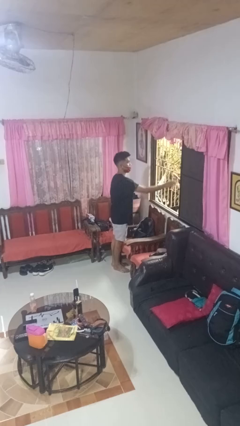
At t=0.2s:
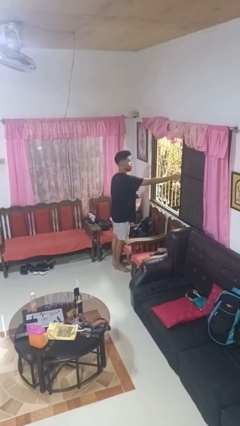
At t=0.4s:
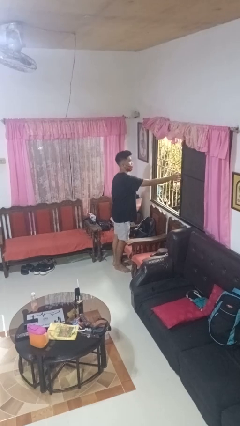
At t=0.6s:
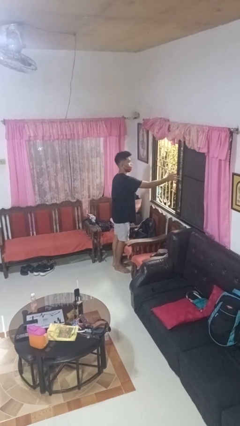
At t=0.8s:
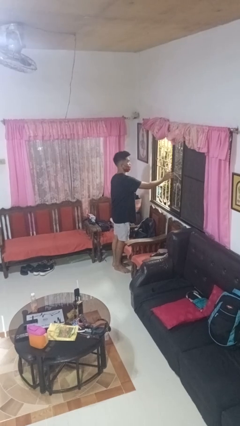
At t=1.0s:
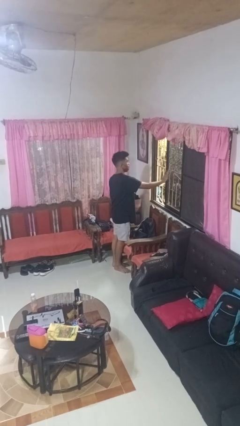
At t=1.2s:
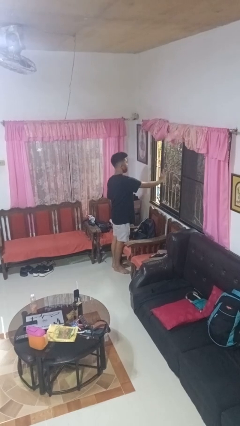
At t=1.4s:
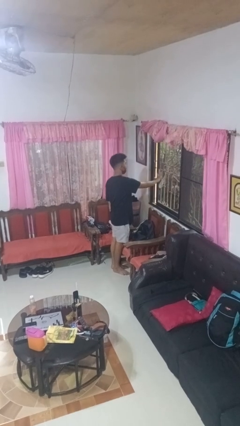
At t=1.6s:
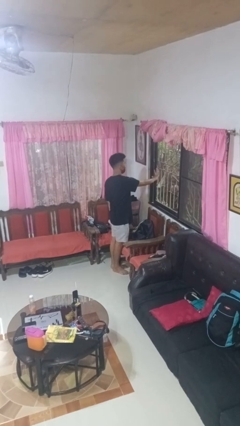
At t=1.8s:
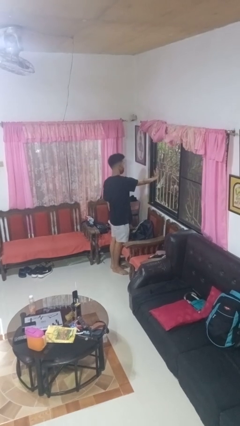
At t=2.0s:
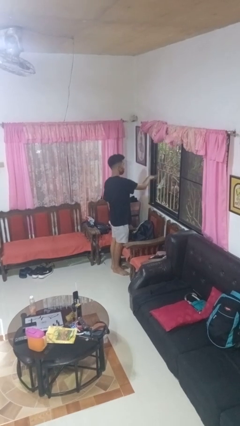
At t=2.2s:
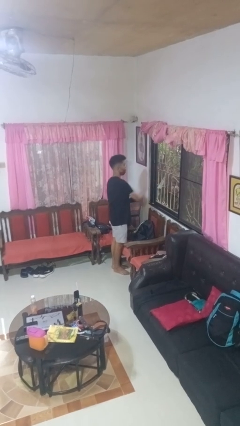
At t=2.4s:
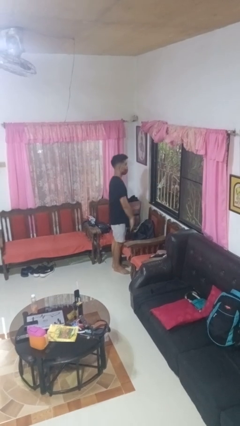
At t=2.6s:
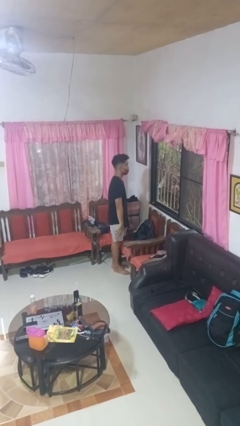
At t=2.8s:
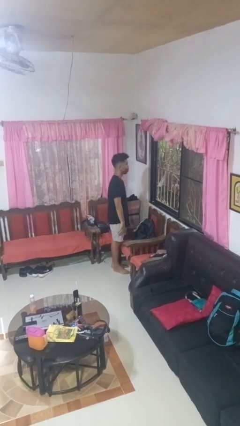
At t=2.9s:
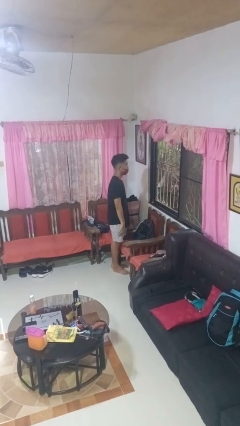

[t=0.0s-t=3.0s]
person closes home window

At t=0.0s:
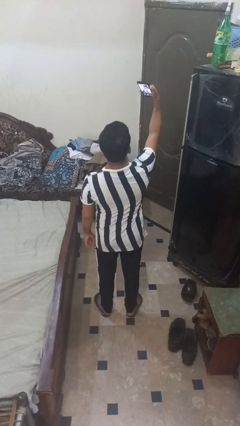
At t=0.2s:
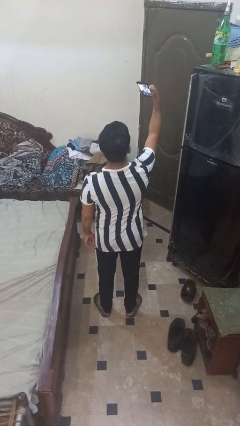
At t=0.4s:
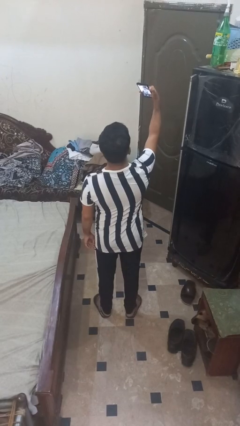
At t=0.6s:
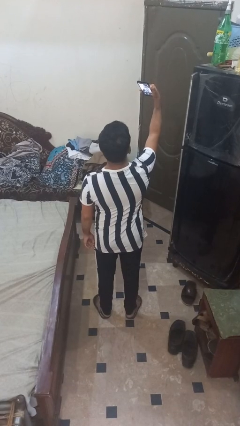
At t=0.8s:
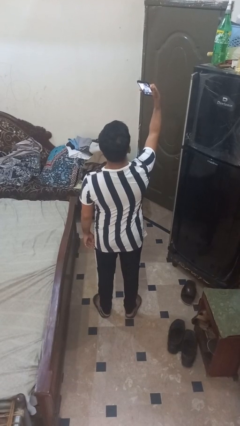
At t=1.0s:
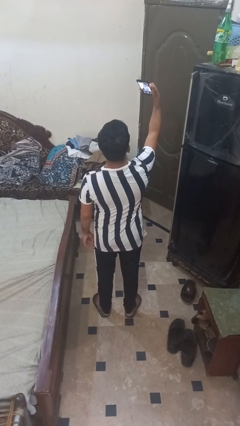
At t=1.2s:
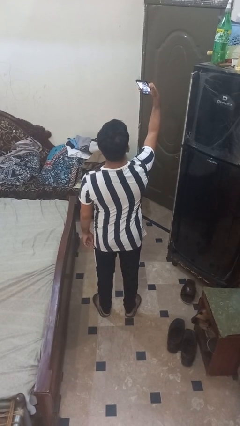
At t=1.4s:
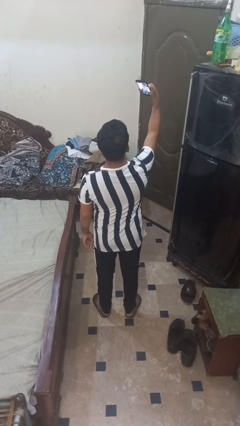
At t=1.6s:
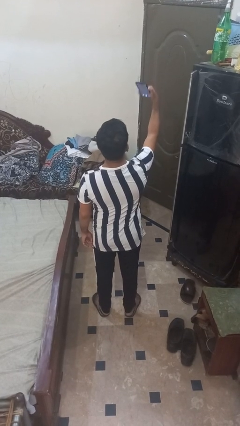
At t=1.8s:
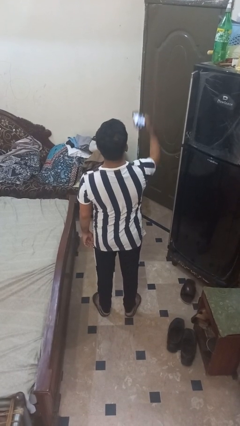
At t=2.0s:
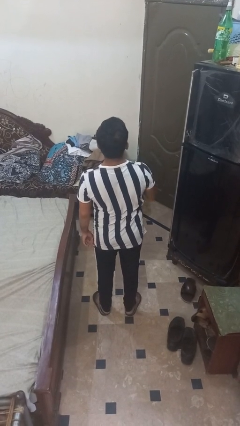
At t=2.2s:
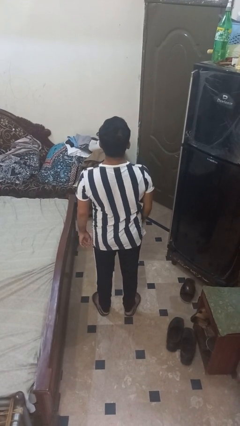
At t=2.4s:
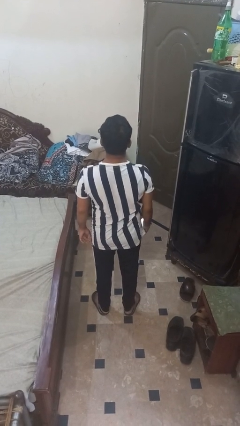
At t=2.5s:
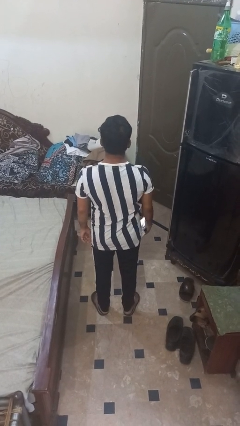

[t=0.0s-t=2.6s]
person takes selfie

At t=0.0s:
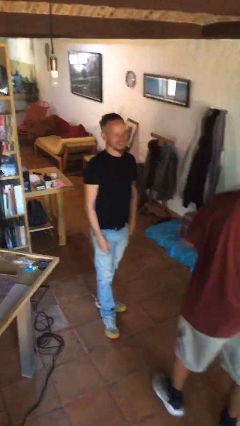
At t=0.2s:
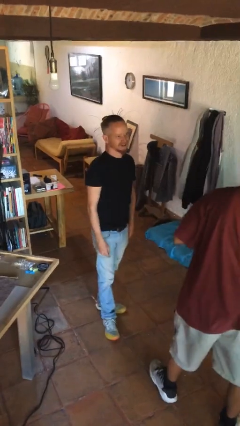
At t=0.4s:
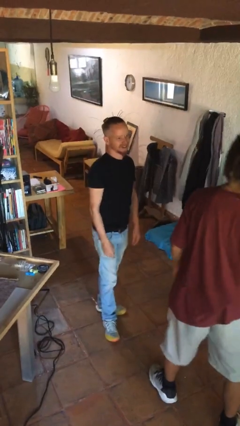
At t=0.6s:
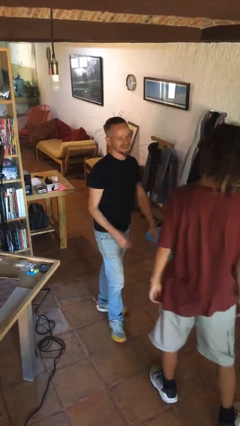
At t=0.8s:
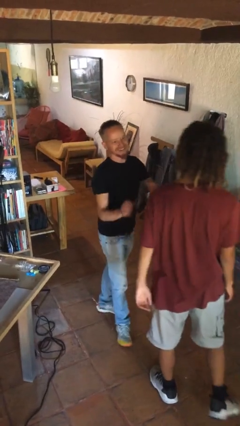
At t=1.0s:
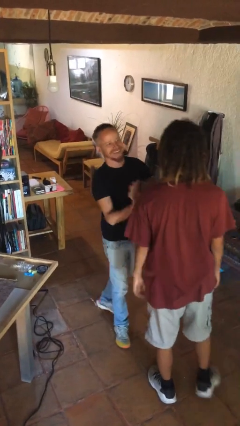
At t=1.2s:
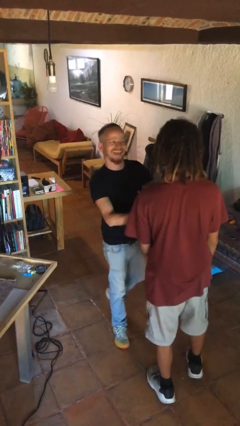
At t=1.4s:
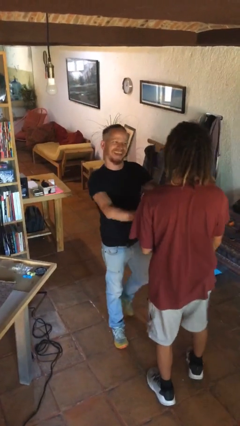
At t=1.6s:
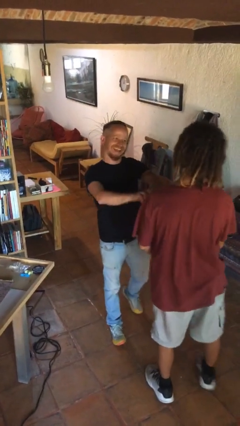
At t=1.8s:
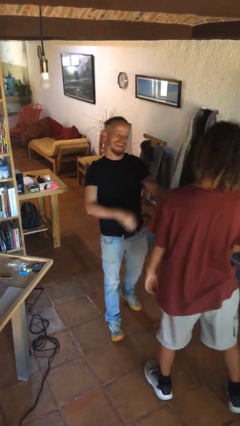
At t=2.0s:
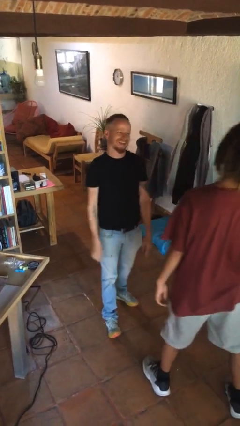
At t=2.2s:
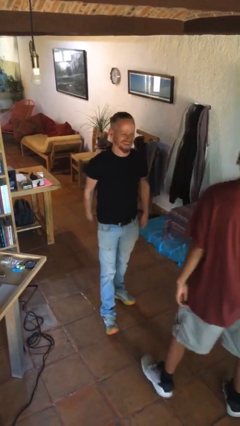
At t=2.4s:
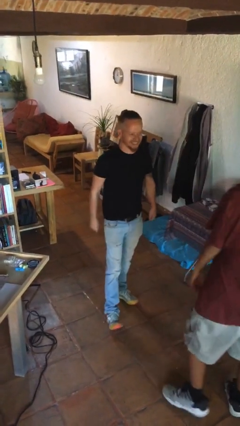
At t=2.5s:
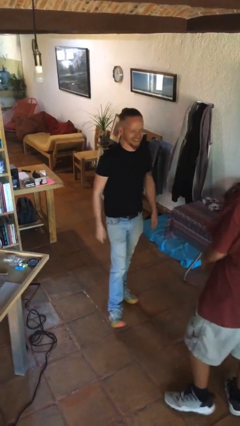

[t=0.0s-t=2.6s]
person shoves person

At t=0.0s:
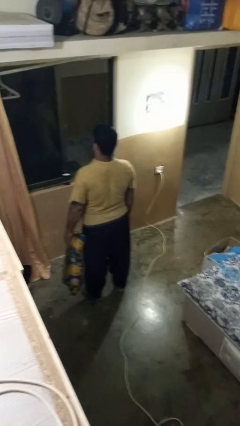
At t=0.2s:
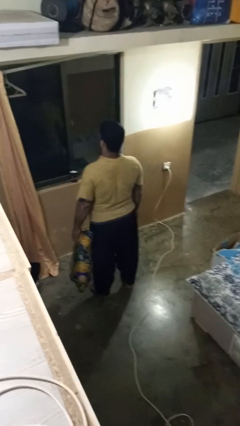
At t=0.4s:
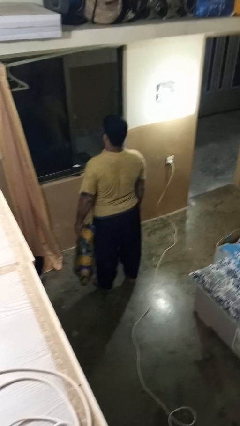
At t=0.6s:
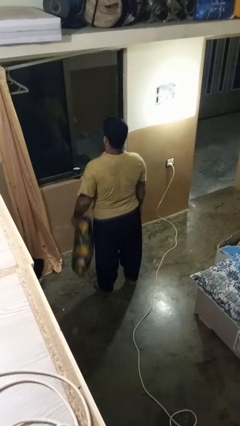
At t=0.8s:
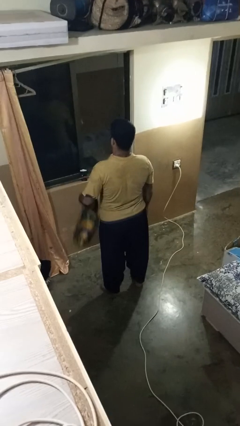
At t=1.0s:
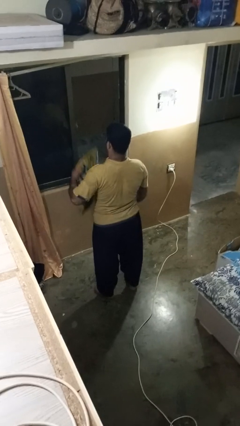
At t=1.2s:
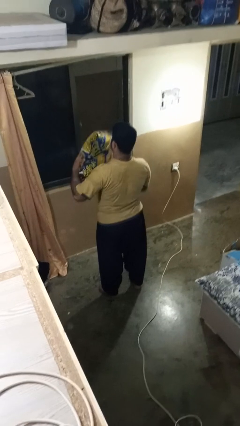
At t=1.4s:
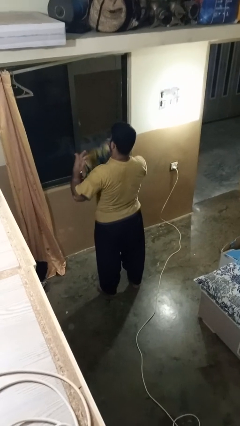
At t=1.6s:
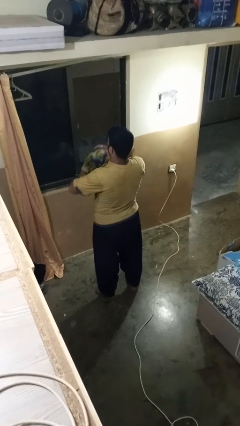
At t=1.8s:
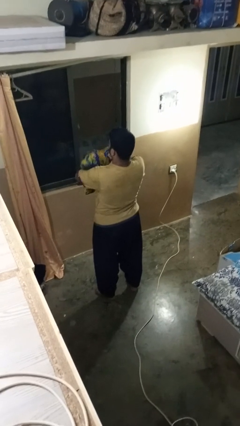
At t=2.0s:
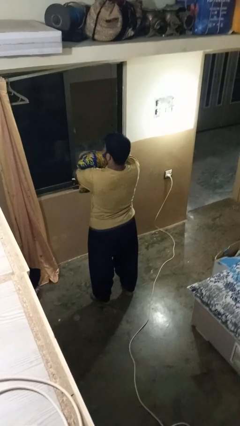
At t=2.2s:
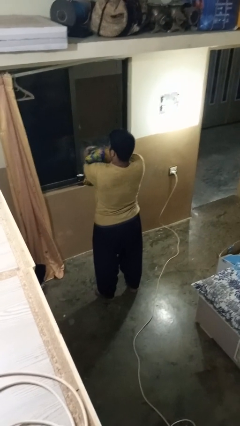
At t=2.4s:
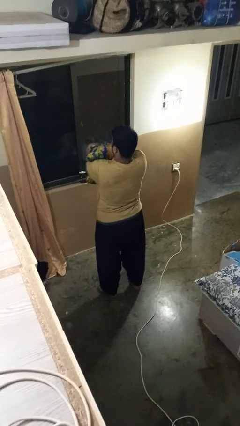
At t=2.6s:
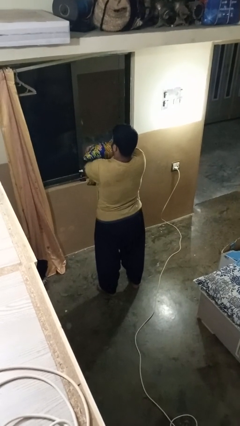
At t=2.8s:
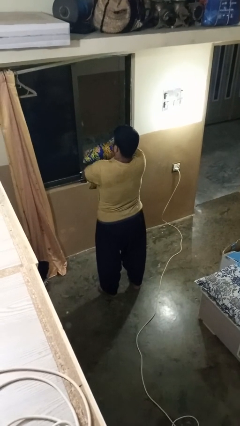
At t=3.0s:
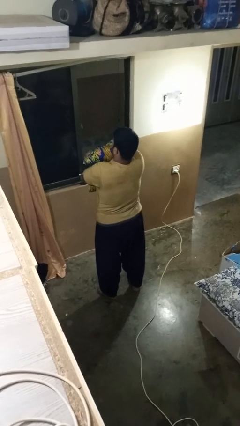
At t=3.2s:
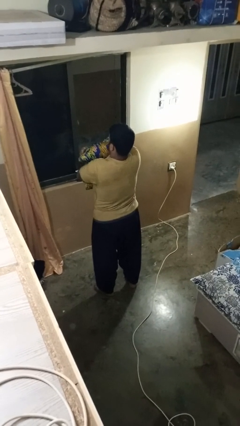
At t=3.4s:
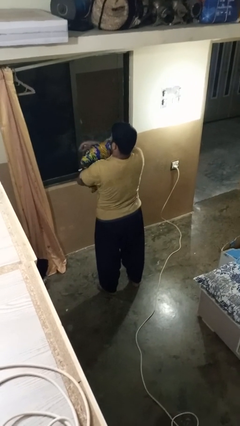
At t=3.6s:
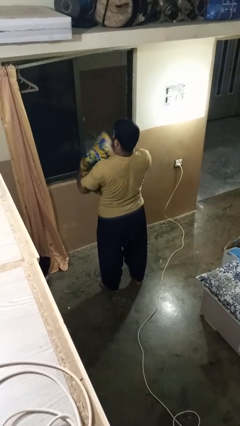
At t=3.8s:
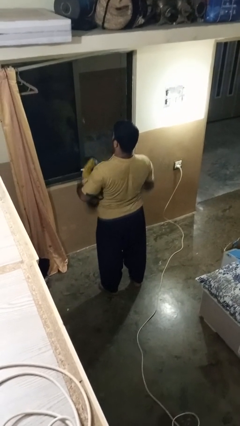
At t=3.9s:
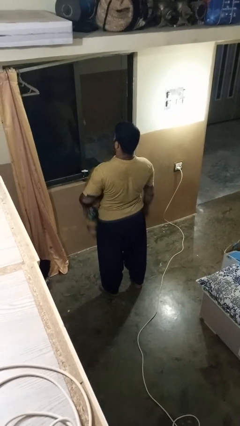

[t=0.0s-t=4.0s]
person squeezes object

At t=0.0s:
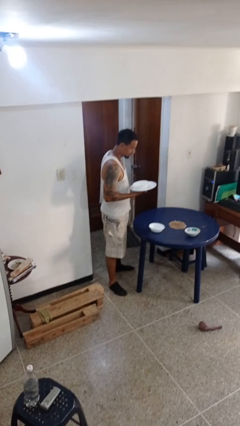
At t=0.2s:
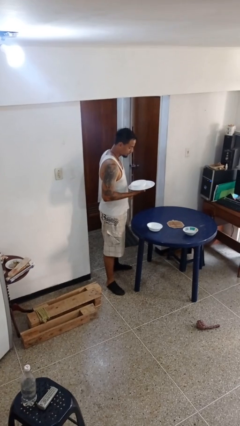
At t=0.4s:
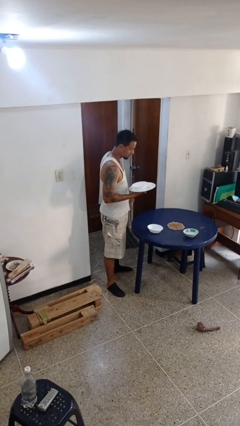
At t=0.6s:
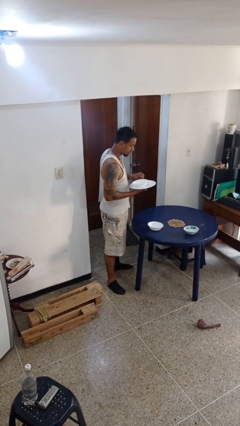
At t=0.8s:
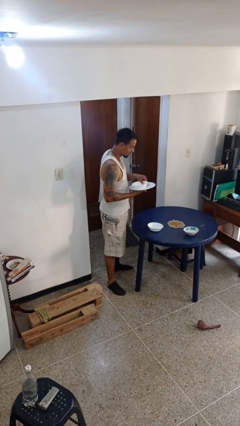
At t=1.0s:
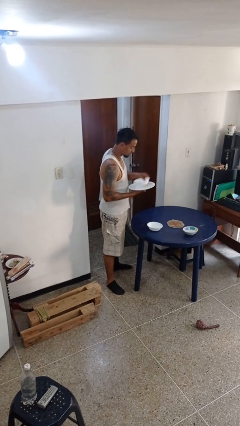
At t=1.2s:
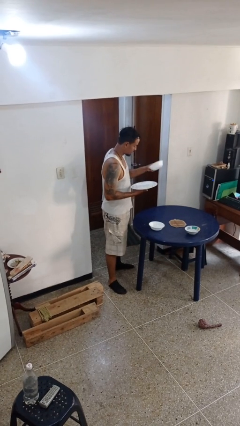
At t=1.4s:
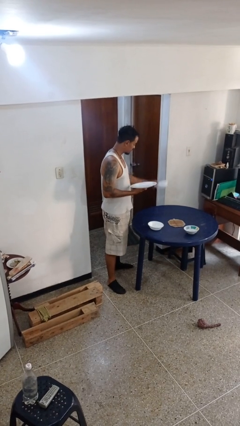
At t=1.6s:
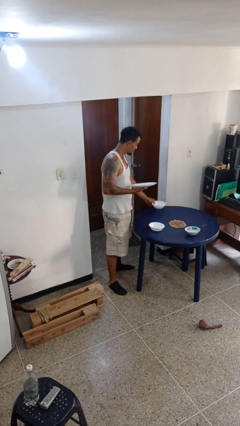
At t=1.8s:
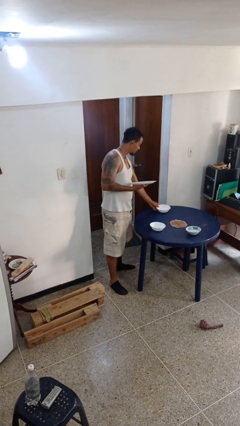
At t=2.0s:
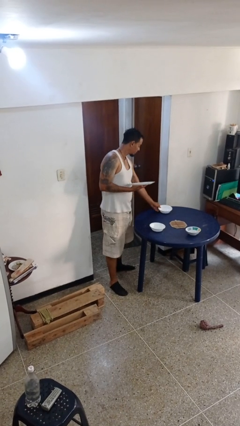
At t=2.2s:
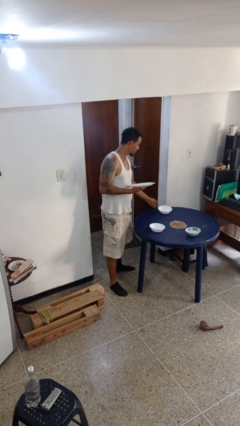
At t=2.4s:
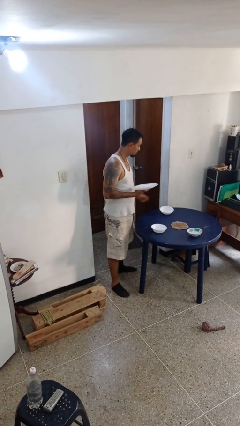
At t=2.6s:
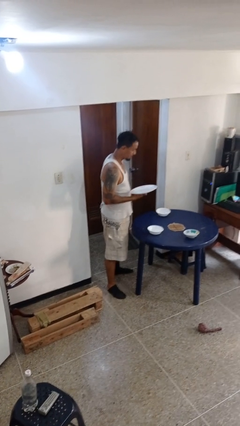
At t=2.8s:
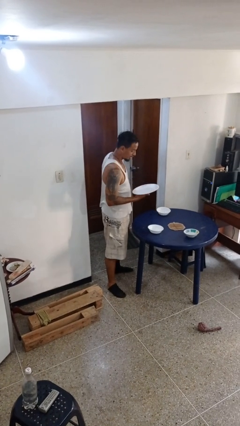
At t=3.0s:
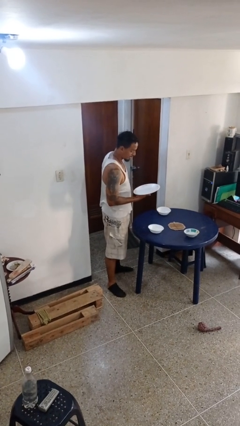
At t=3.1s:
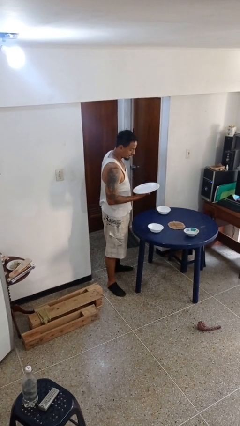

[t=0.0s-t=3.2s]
person sets table

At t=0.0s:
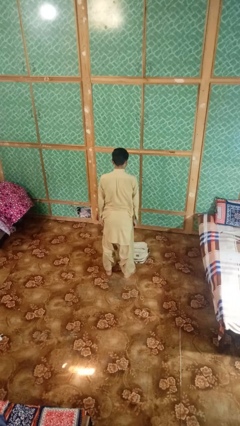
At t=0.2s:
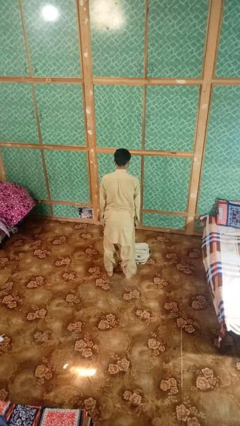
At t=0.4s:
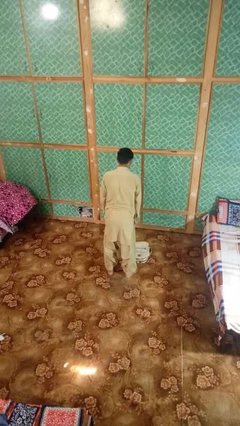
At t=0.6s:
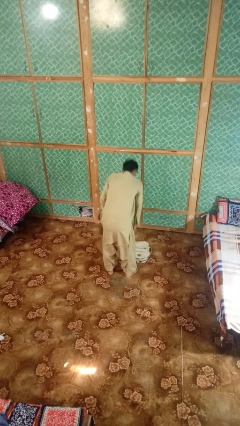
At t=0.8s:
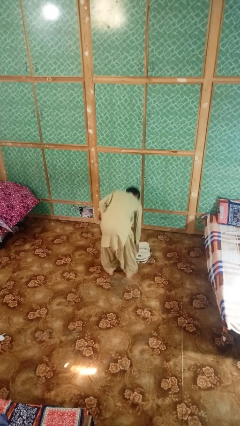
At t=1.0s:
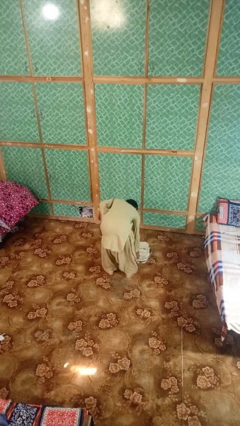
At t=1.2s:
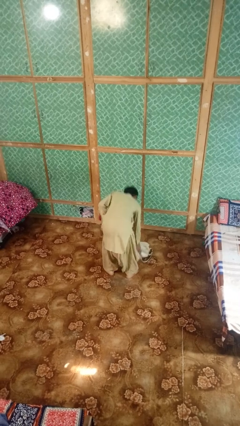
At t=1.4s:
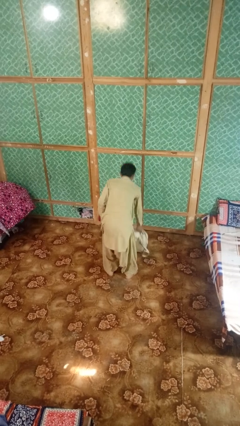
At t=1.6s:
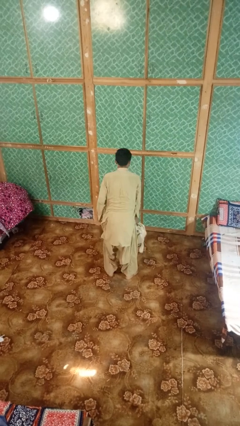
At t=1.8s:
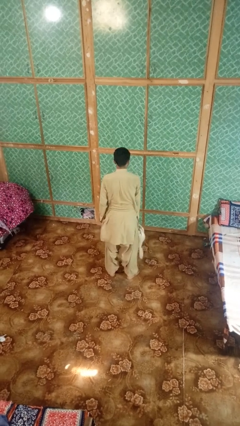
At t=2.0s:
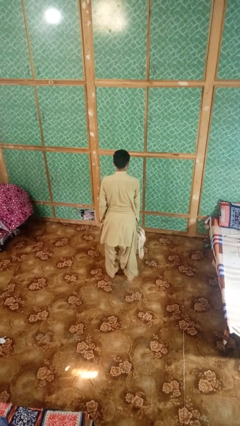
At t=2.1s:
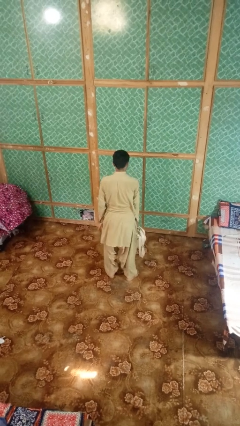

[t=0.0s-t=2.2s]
person picks up object from floor
